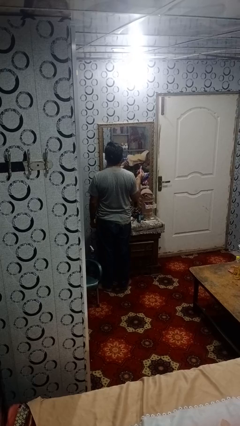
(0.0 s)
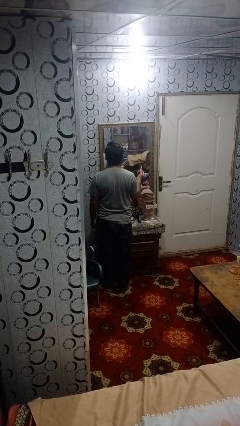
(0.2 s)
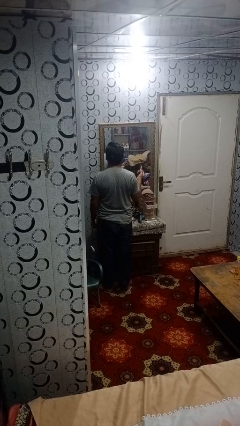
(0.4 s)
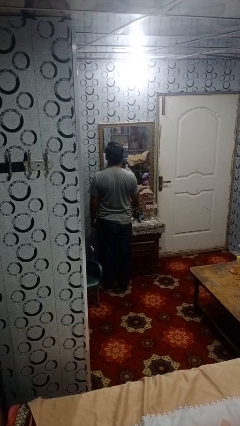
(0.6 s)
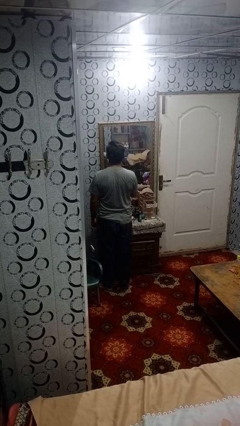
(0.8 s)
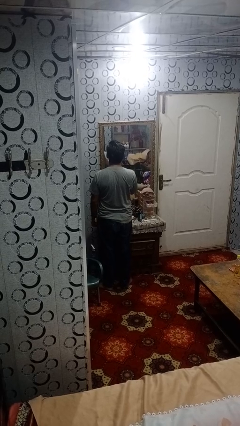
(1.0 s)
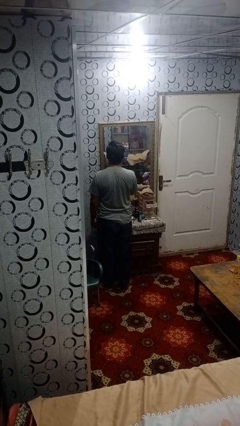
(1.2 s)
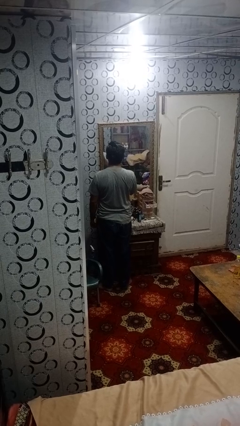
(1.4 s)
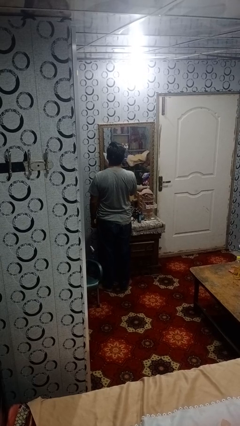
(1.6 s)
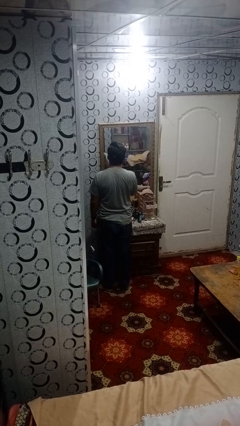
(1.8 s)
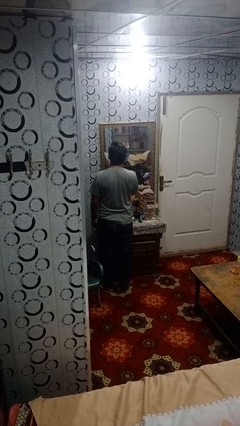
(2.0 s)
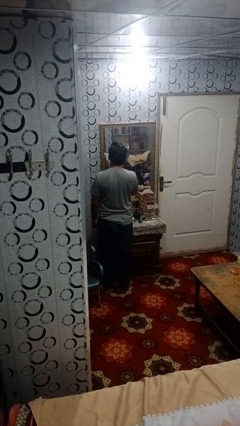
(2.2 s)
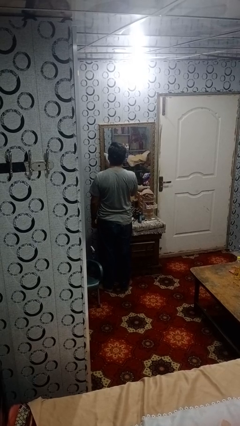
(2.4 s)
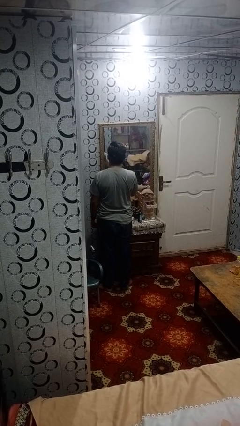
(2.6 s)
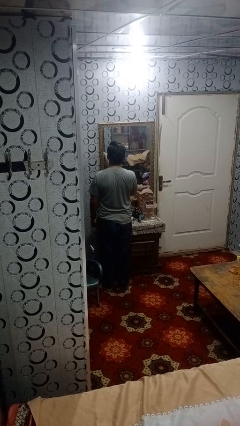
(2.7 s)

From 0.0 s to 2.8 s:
person applies lip makeup

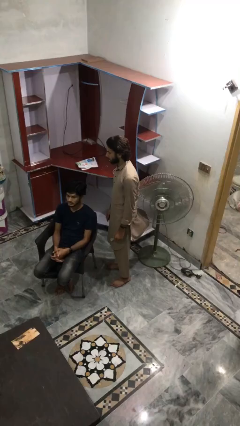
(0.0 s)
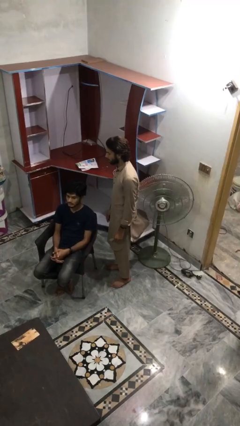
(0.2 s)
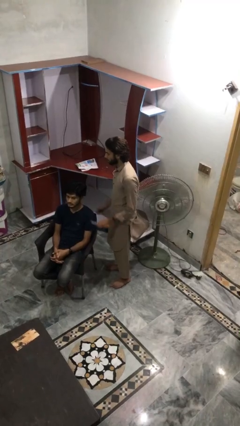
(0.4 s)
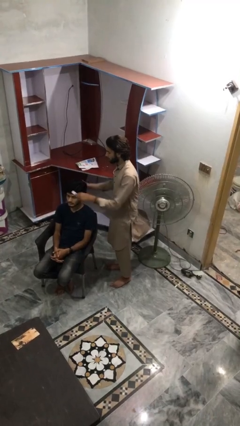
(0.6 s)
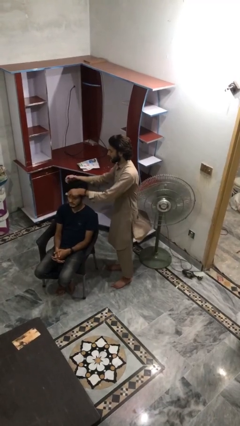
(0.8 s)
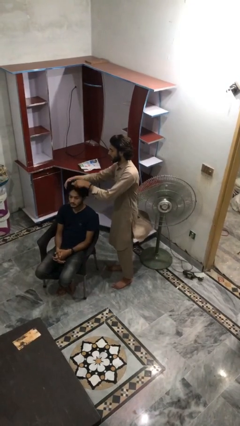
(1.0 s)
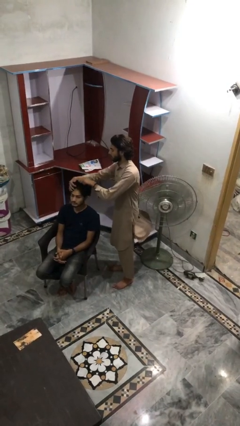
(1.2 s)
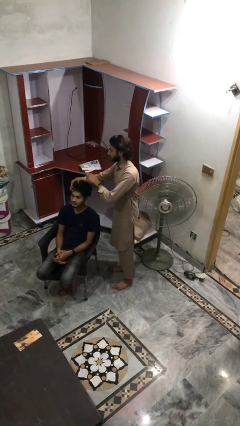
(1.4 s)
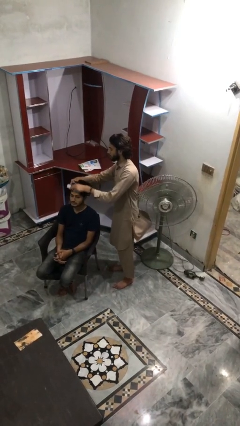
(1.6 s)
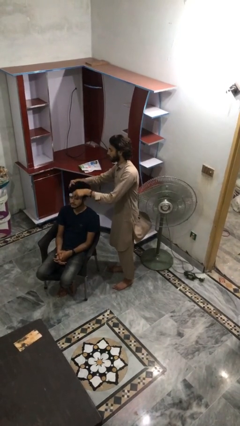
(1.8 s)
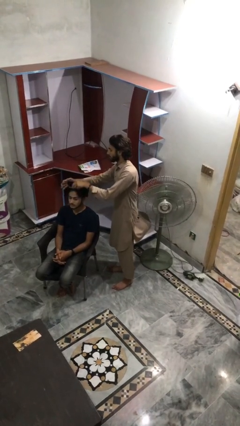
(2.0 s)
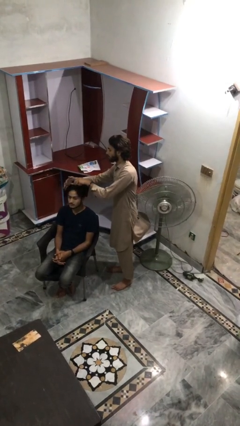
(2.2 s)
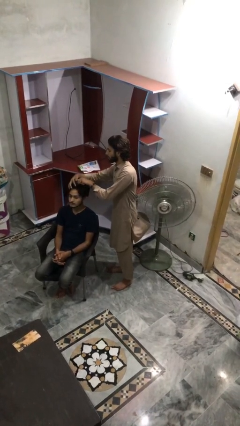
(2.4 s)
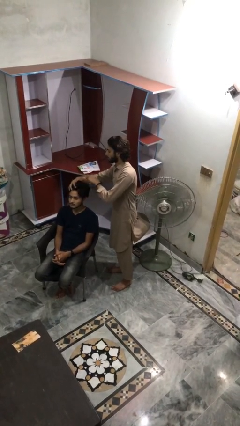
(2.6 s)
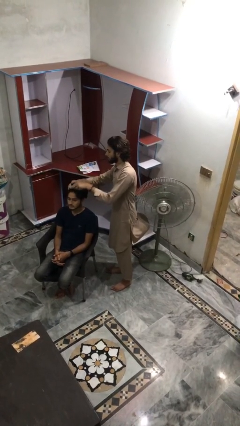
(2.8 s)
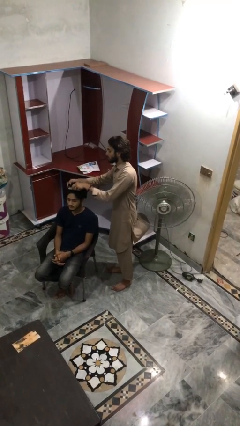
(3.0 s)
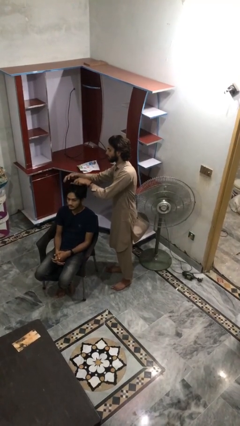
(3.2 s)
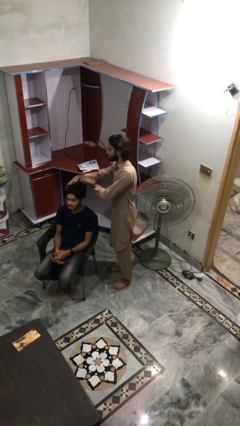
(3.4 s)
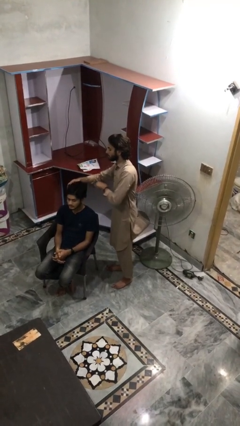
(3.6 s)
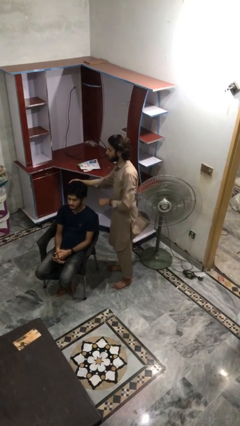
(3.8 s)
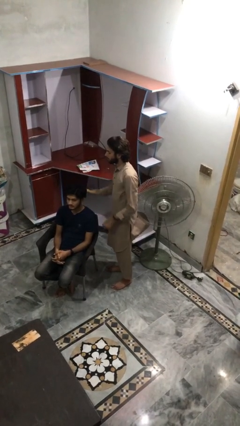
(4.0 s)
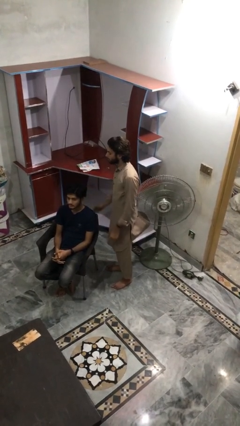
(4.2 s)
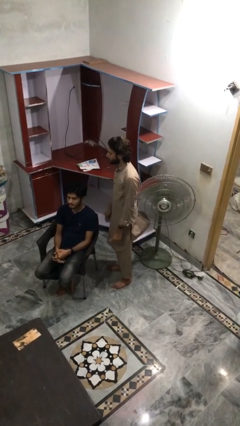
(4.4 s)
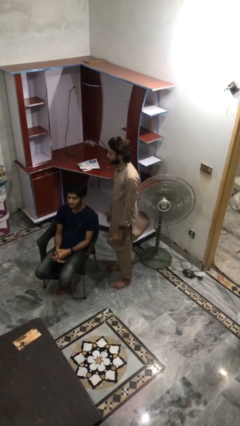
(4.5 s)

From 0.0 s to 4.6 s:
person brushes hair of person

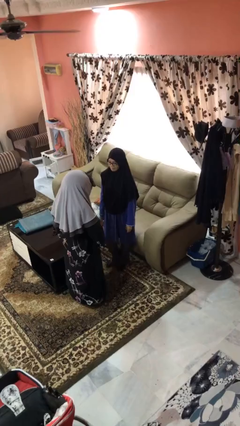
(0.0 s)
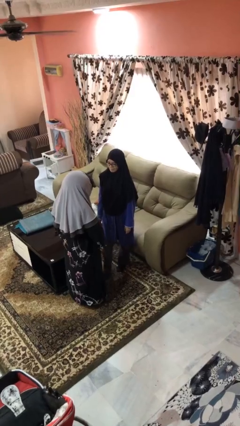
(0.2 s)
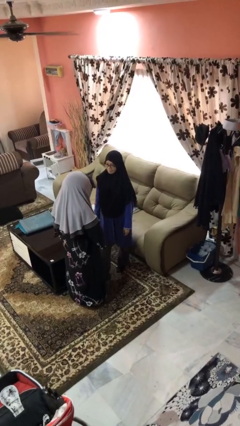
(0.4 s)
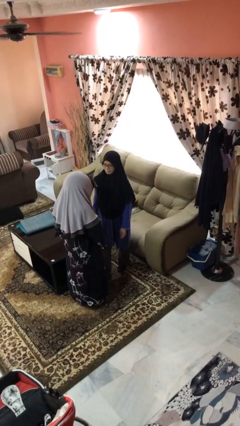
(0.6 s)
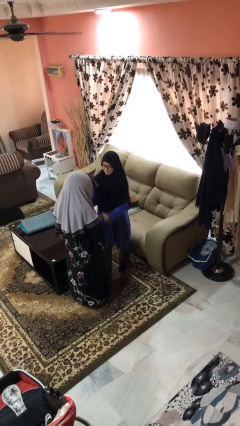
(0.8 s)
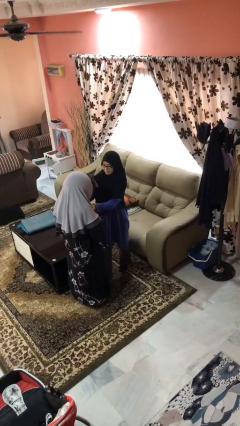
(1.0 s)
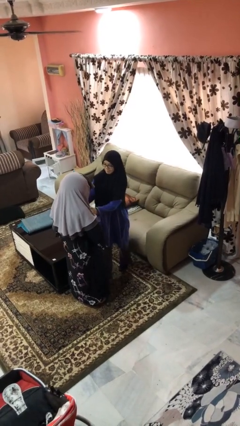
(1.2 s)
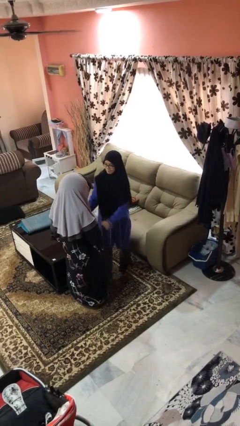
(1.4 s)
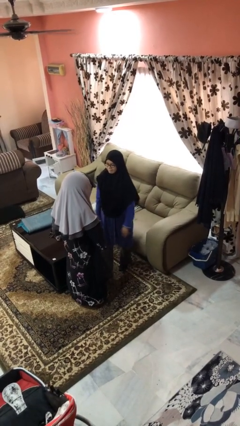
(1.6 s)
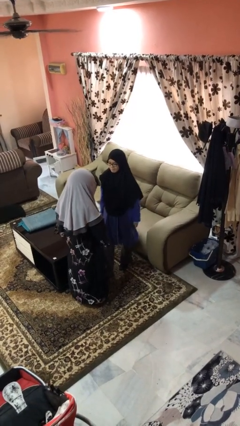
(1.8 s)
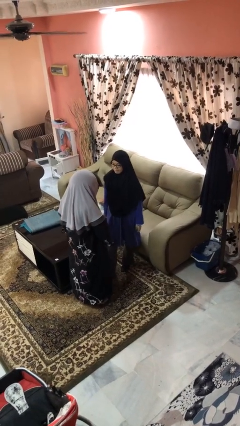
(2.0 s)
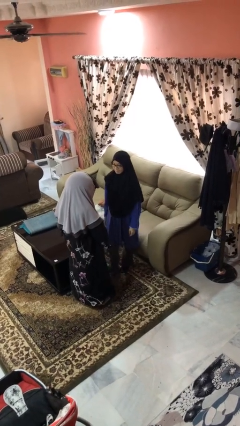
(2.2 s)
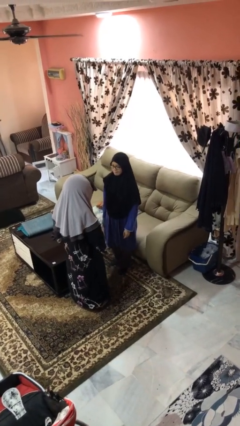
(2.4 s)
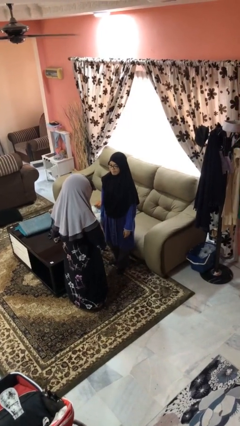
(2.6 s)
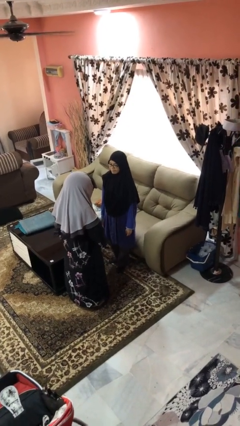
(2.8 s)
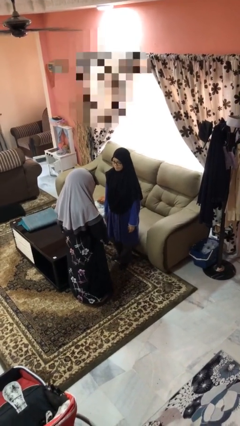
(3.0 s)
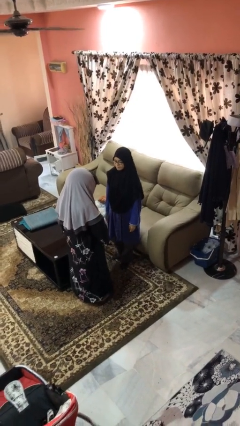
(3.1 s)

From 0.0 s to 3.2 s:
person shoves person

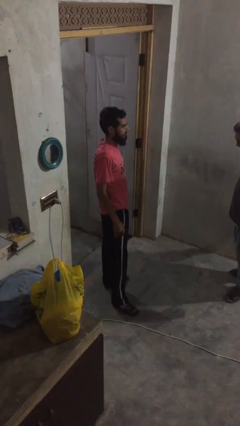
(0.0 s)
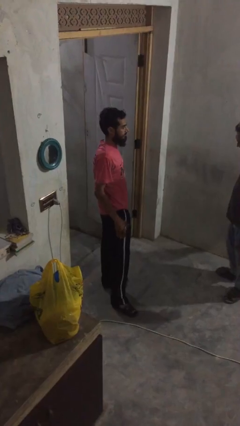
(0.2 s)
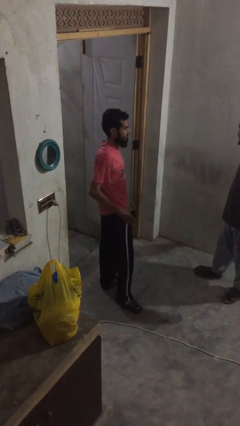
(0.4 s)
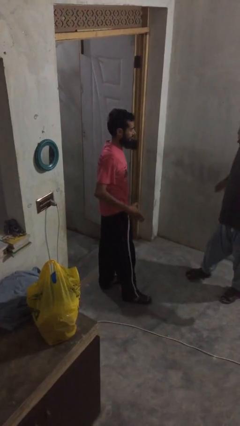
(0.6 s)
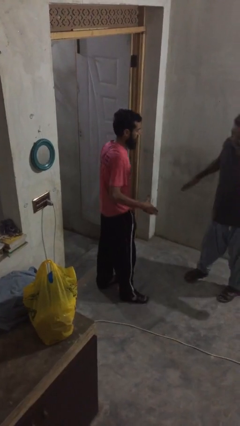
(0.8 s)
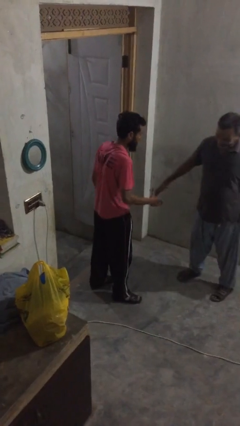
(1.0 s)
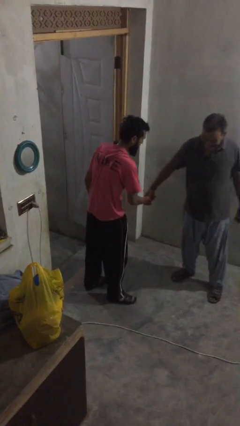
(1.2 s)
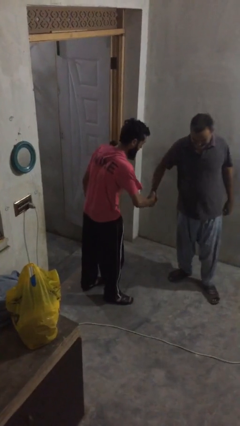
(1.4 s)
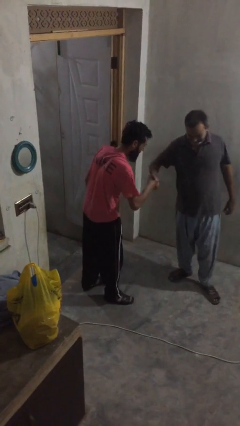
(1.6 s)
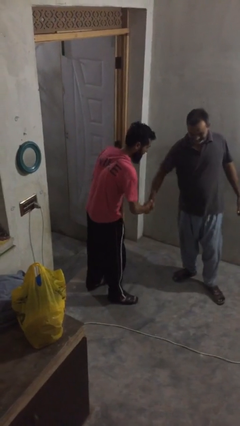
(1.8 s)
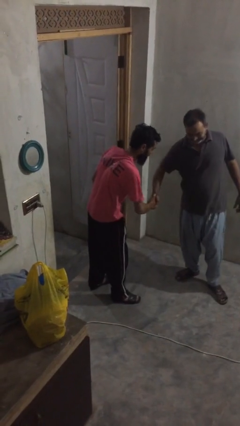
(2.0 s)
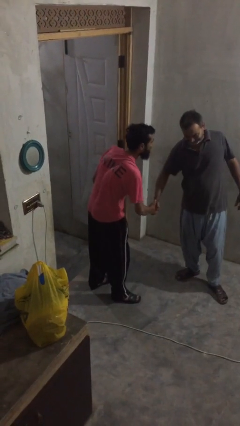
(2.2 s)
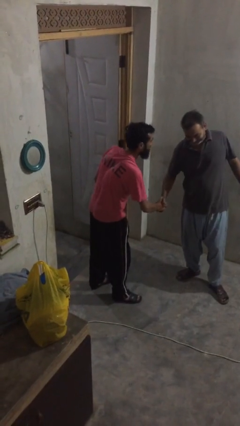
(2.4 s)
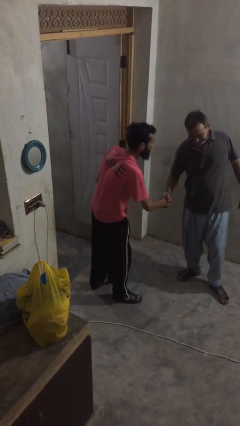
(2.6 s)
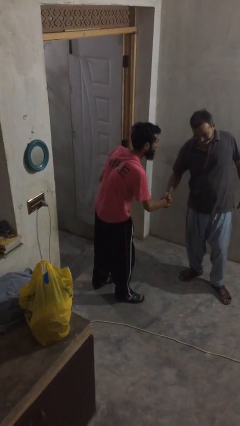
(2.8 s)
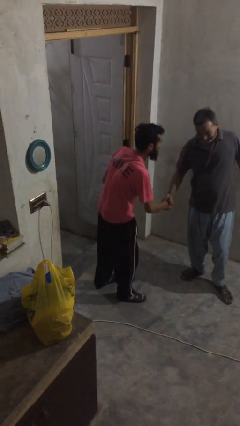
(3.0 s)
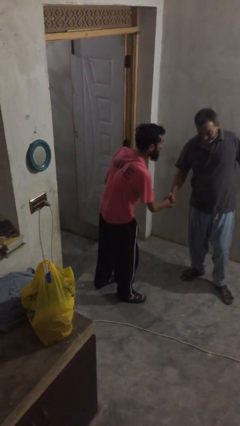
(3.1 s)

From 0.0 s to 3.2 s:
person shakes hand

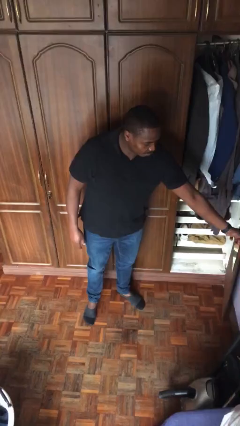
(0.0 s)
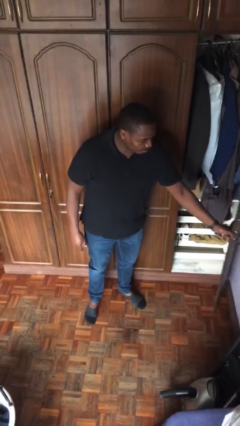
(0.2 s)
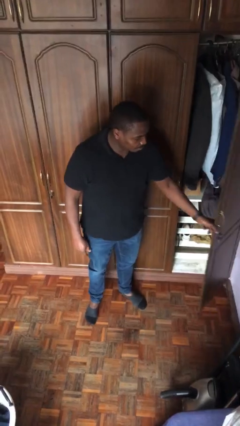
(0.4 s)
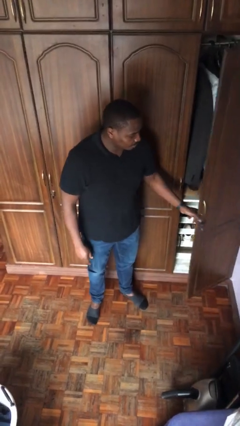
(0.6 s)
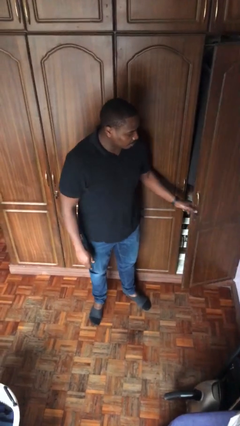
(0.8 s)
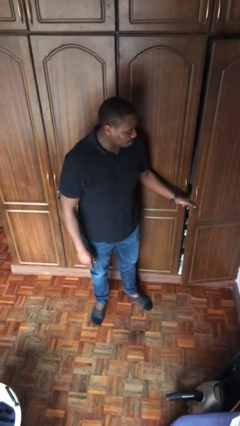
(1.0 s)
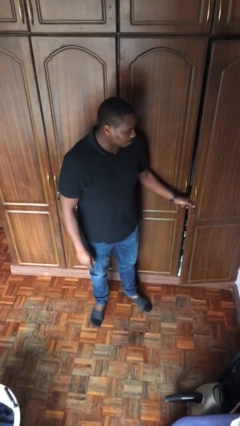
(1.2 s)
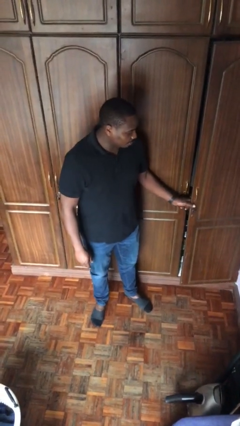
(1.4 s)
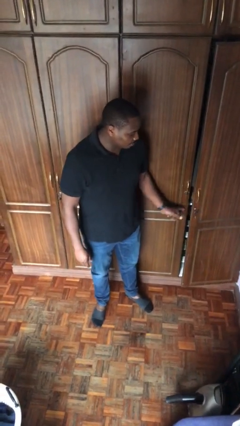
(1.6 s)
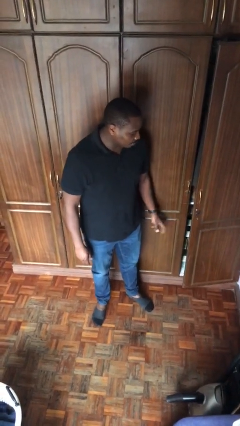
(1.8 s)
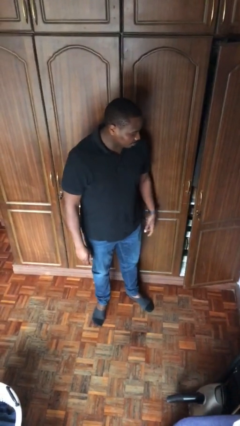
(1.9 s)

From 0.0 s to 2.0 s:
person closes closet door

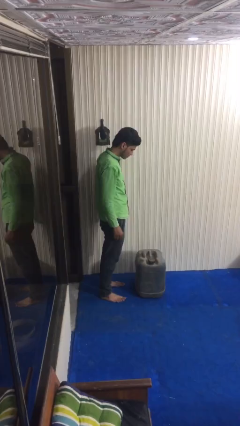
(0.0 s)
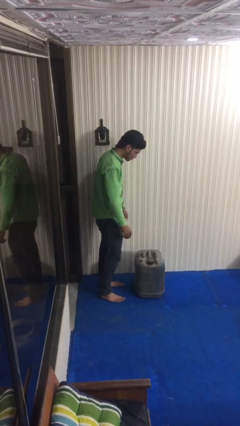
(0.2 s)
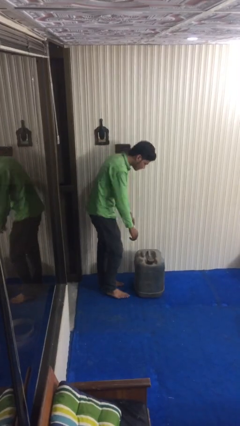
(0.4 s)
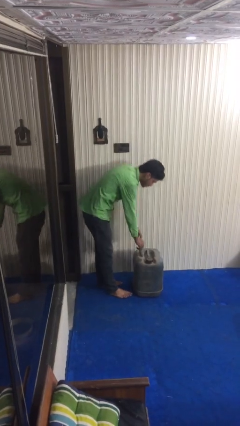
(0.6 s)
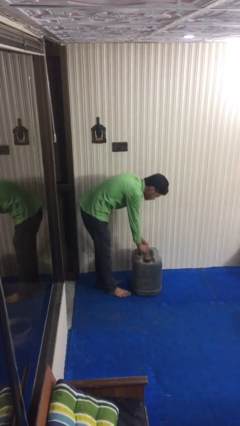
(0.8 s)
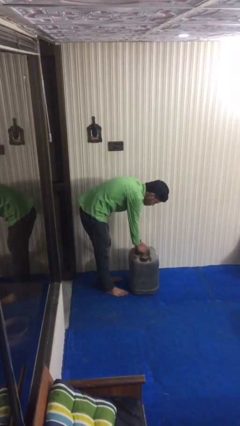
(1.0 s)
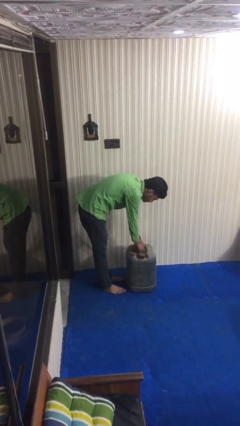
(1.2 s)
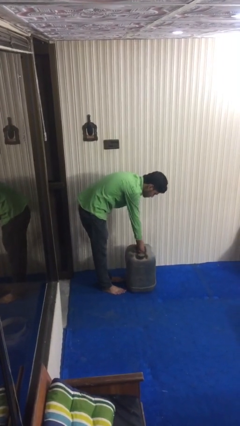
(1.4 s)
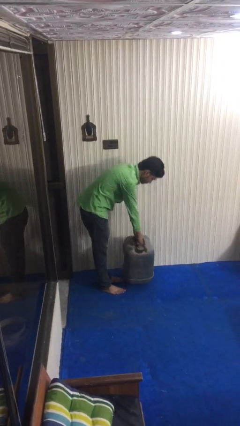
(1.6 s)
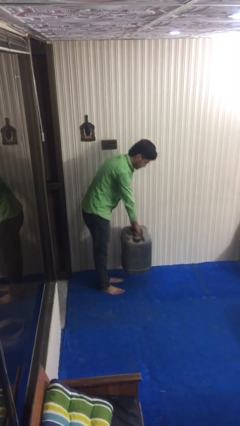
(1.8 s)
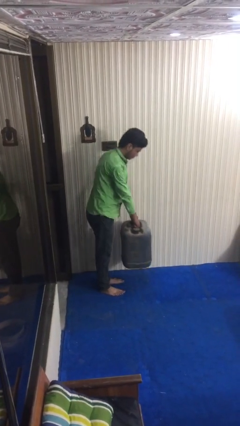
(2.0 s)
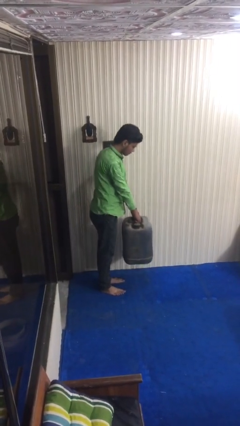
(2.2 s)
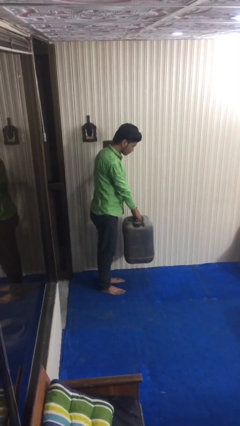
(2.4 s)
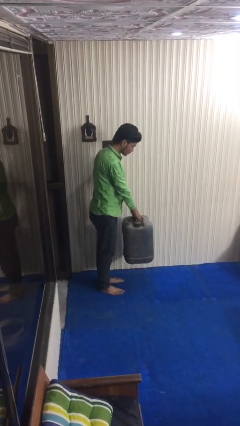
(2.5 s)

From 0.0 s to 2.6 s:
person picks up object from floor
